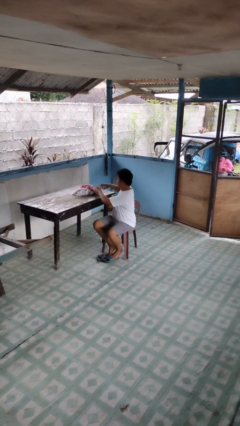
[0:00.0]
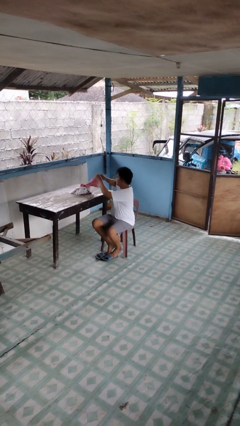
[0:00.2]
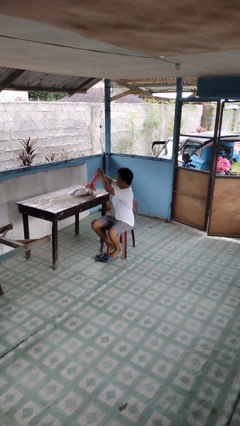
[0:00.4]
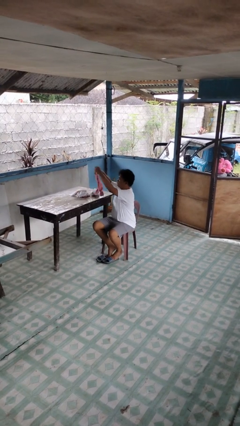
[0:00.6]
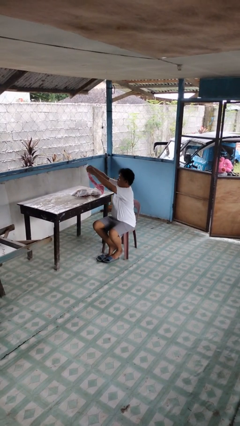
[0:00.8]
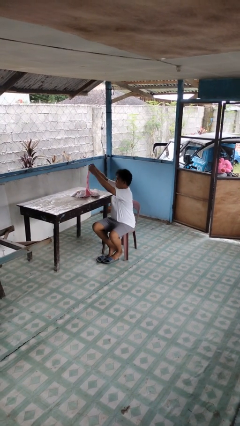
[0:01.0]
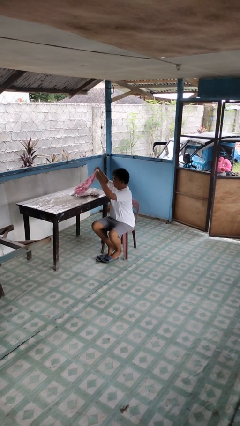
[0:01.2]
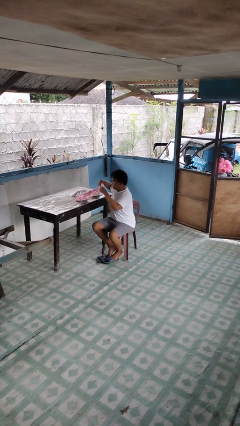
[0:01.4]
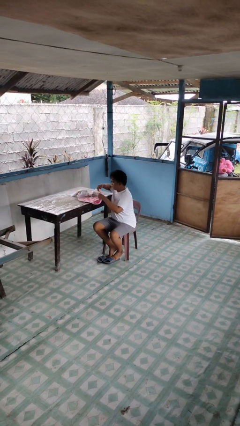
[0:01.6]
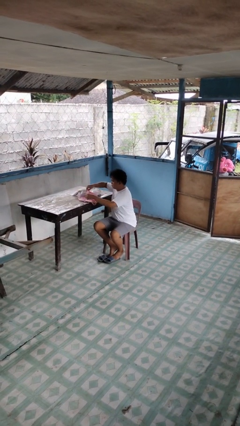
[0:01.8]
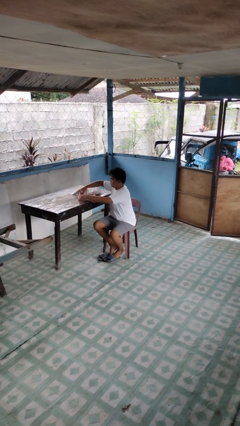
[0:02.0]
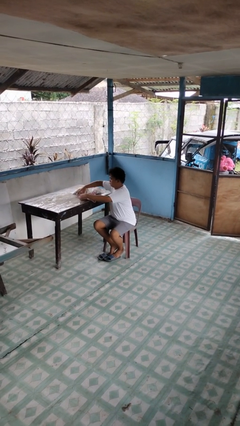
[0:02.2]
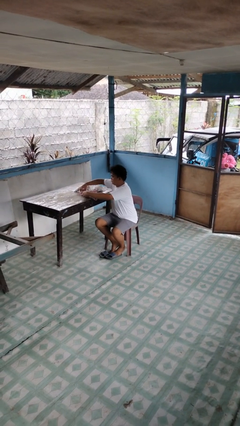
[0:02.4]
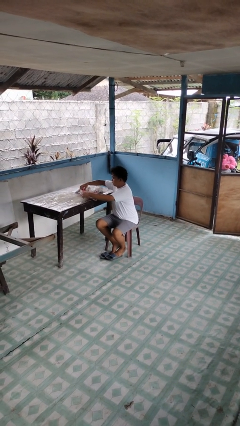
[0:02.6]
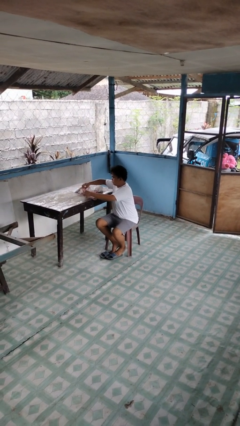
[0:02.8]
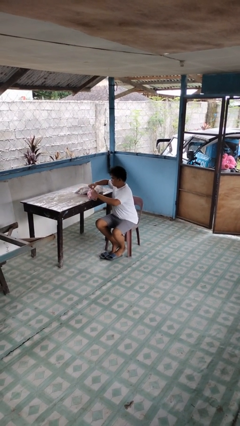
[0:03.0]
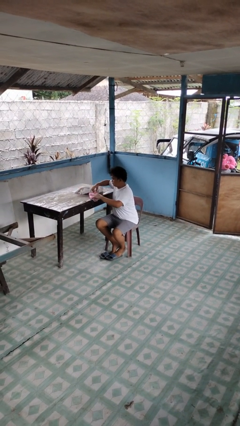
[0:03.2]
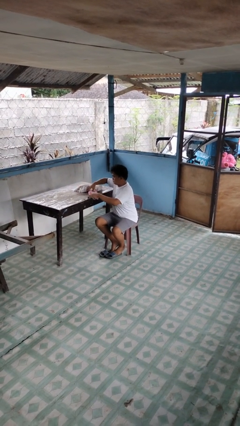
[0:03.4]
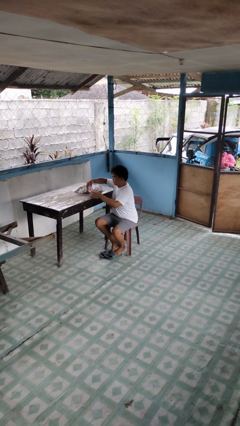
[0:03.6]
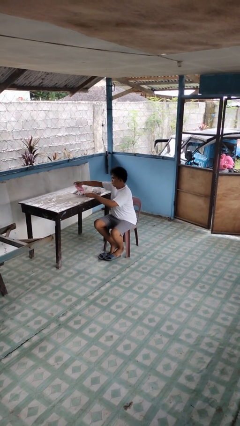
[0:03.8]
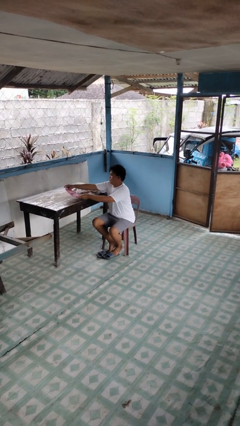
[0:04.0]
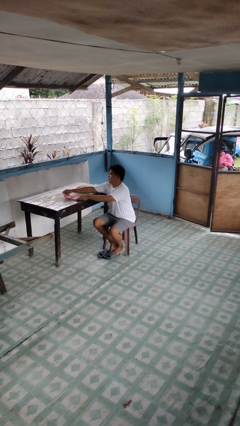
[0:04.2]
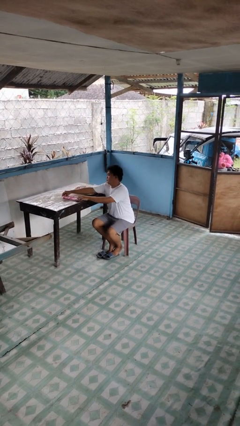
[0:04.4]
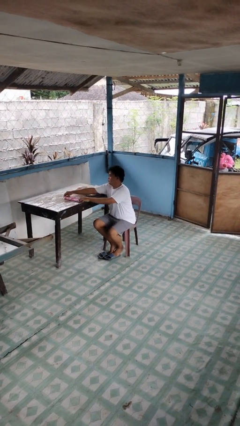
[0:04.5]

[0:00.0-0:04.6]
person folds towel

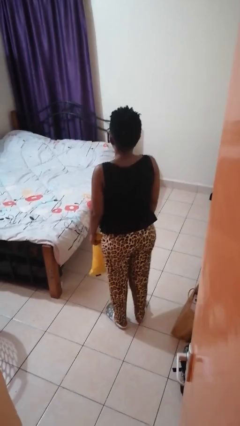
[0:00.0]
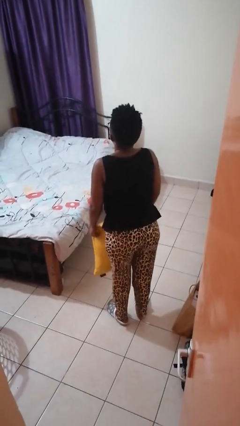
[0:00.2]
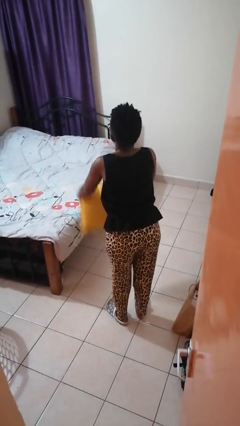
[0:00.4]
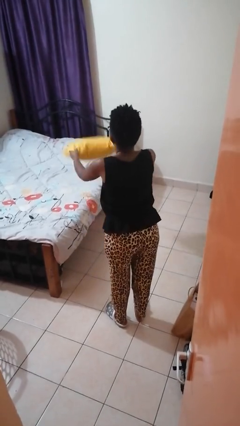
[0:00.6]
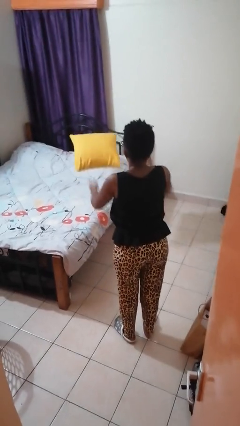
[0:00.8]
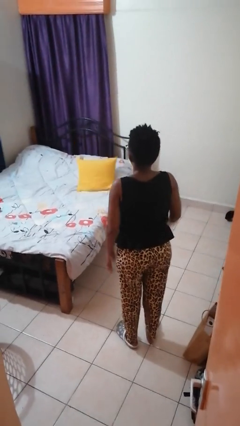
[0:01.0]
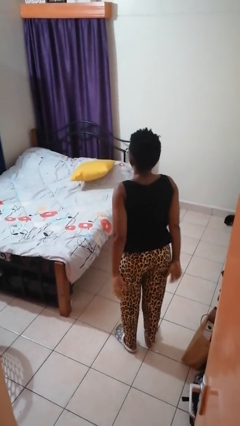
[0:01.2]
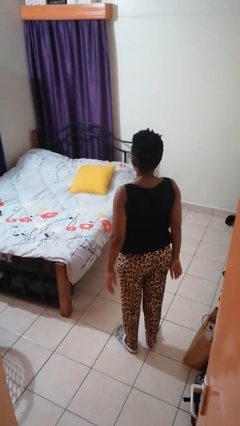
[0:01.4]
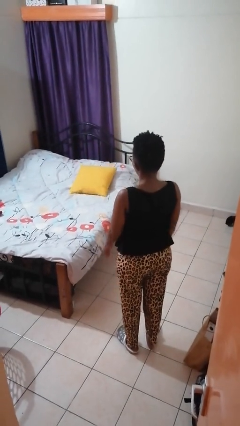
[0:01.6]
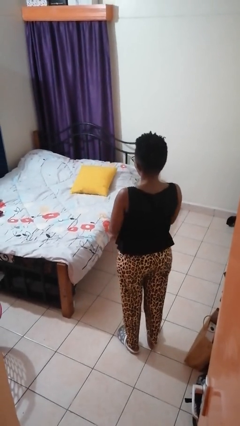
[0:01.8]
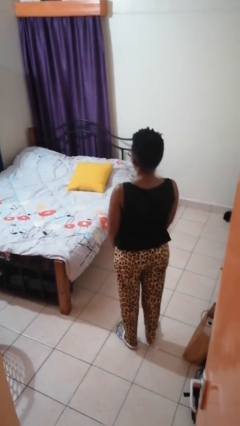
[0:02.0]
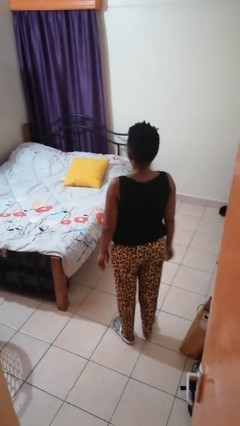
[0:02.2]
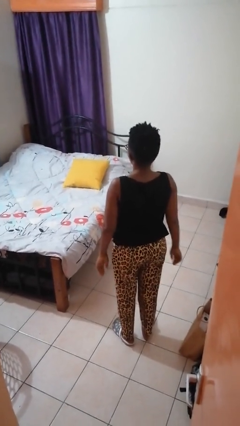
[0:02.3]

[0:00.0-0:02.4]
person throws object on bed

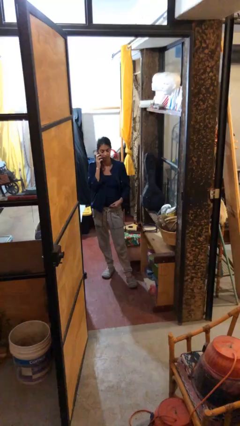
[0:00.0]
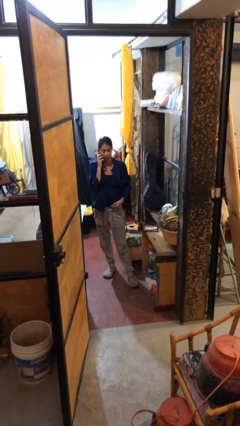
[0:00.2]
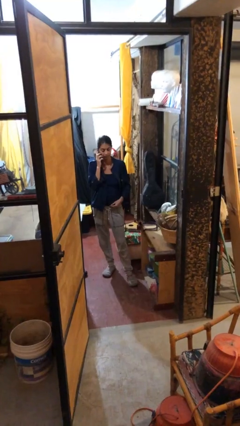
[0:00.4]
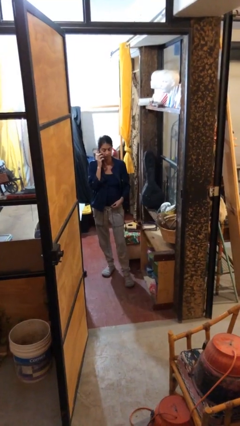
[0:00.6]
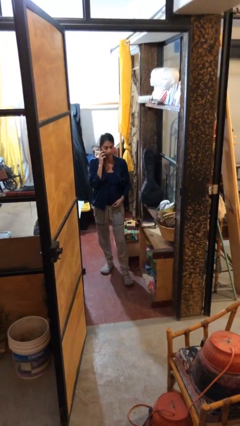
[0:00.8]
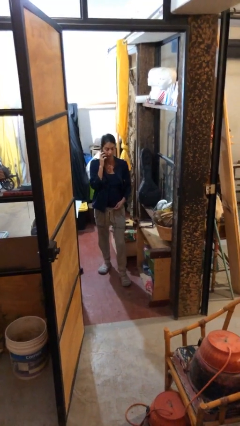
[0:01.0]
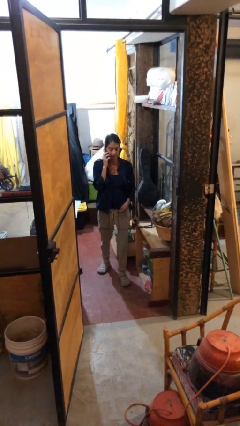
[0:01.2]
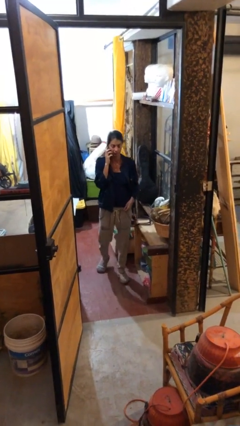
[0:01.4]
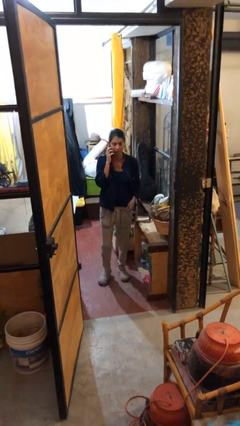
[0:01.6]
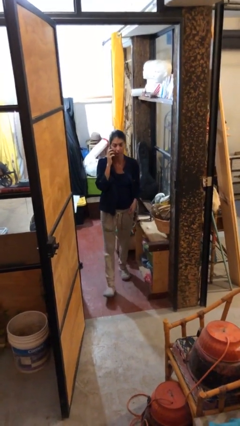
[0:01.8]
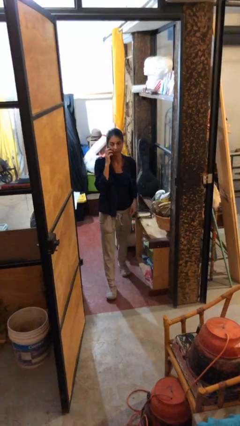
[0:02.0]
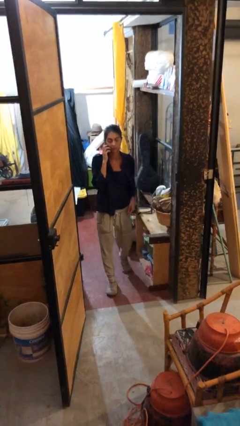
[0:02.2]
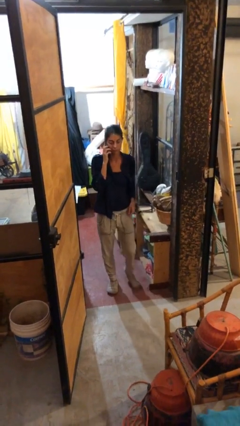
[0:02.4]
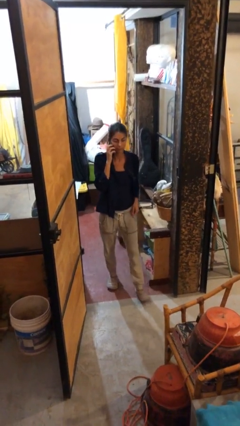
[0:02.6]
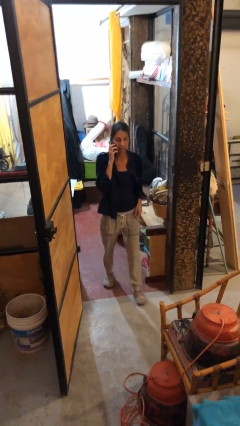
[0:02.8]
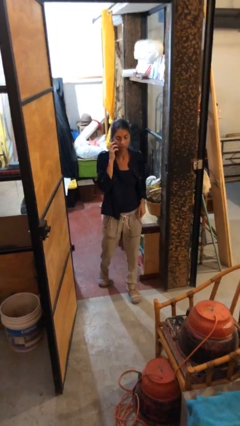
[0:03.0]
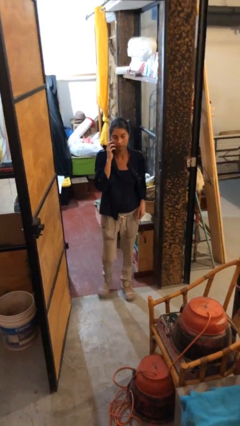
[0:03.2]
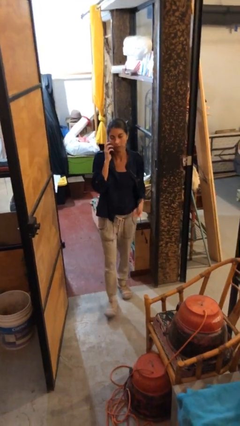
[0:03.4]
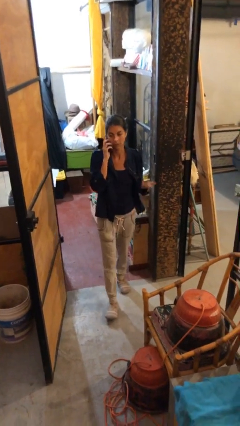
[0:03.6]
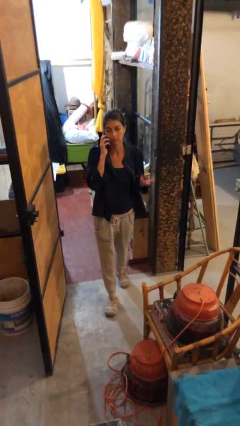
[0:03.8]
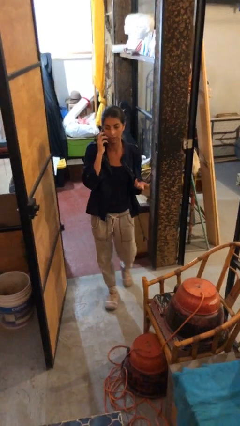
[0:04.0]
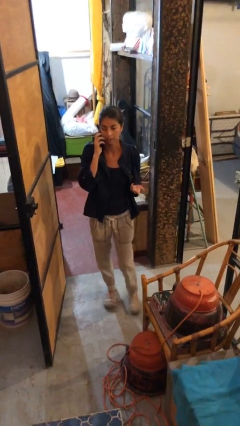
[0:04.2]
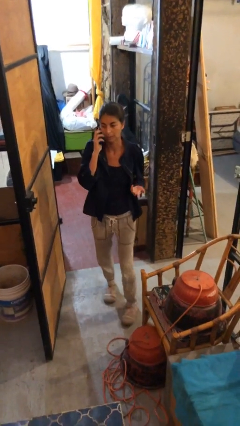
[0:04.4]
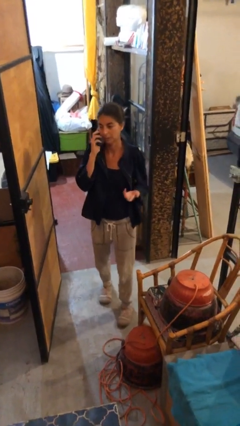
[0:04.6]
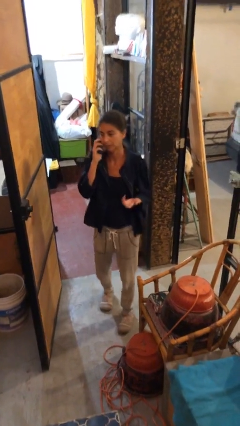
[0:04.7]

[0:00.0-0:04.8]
person enters scene through structure

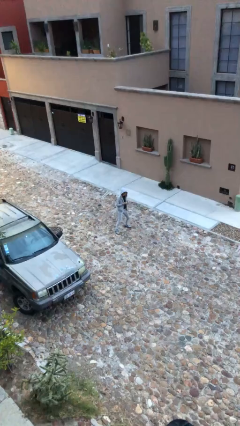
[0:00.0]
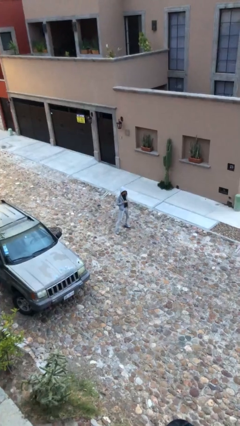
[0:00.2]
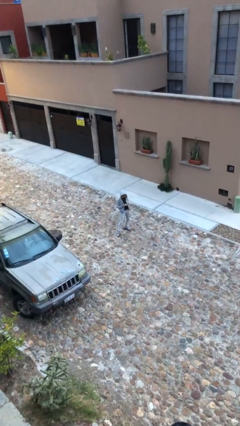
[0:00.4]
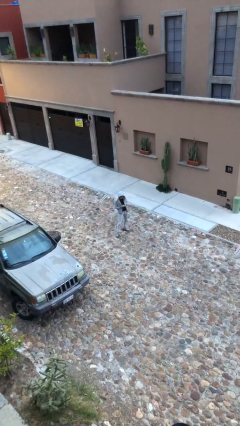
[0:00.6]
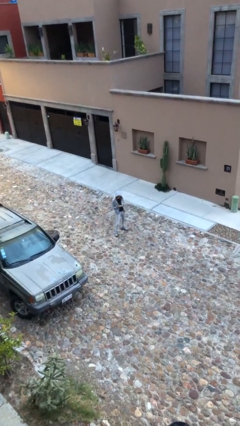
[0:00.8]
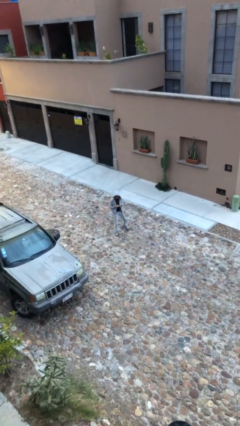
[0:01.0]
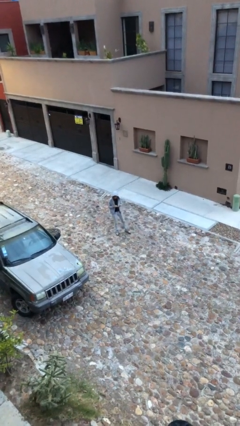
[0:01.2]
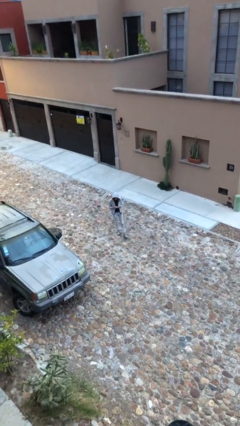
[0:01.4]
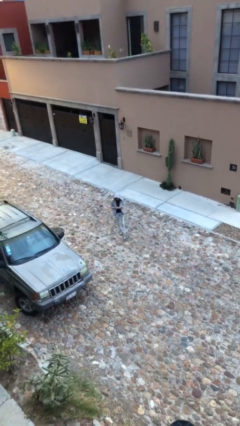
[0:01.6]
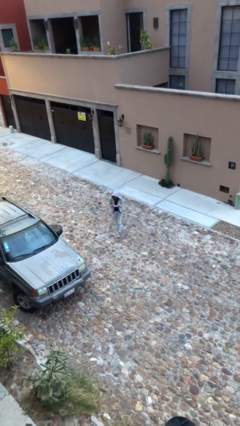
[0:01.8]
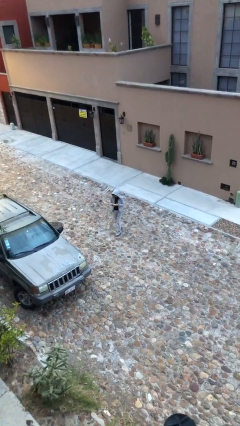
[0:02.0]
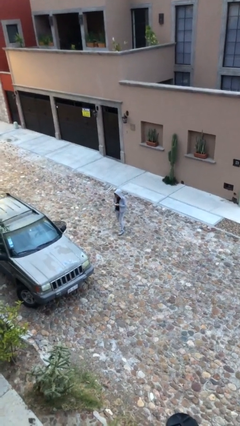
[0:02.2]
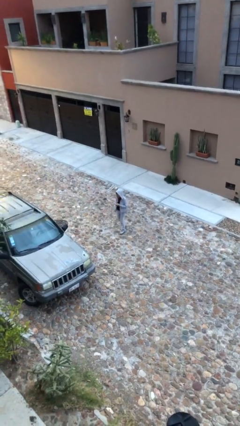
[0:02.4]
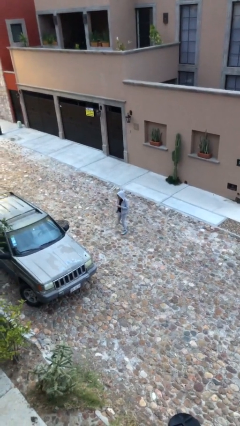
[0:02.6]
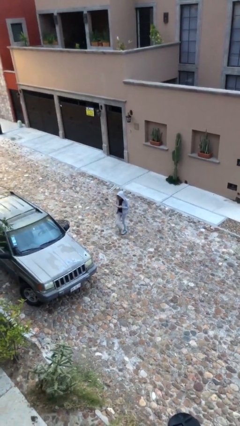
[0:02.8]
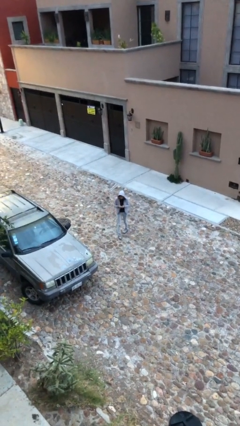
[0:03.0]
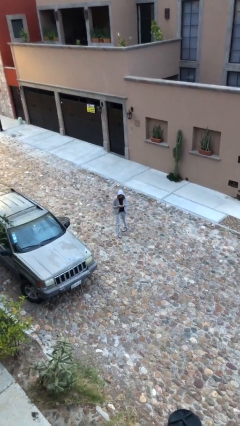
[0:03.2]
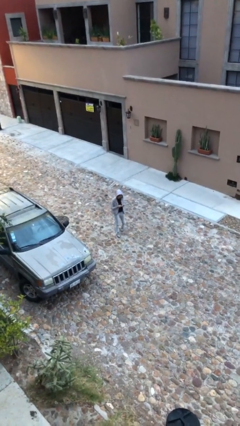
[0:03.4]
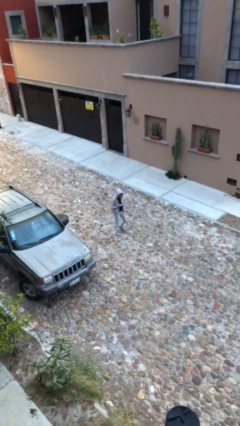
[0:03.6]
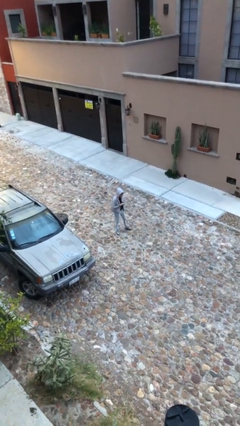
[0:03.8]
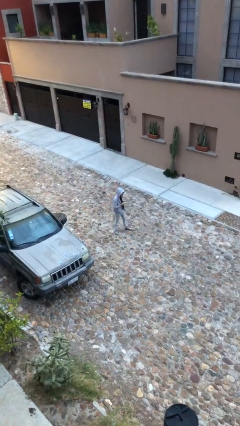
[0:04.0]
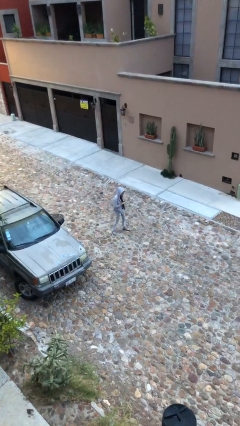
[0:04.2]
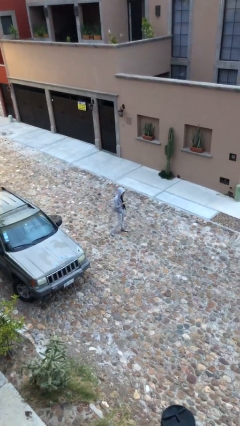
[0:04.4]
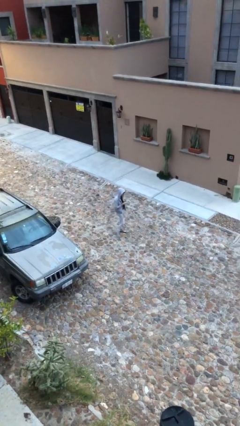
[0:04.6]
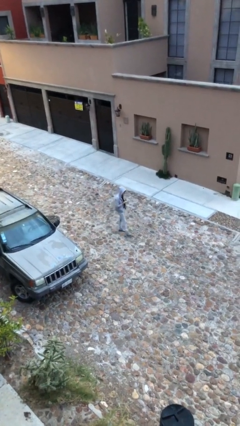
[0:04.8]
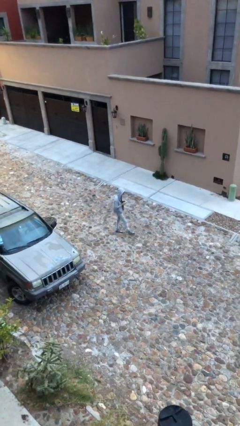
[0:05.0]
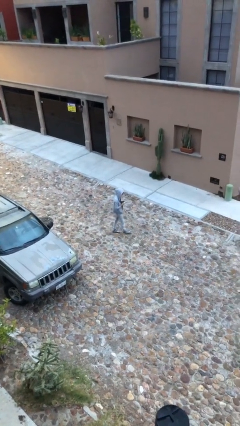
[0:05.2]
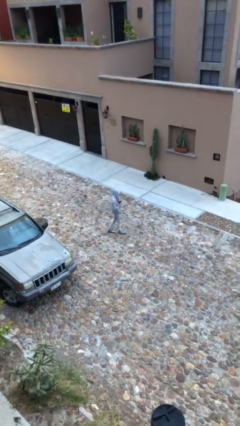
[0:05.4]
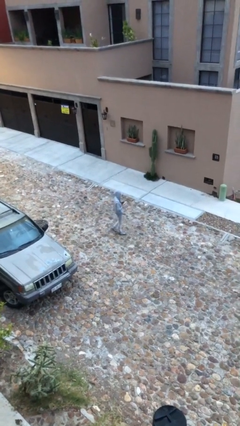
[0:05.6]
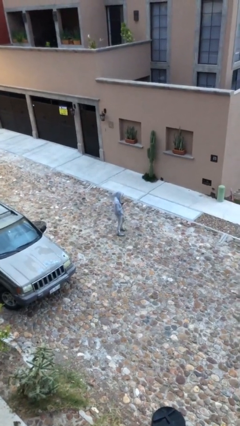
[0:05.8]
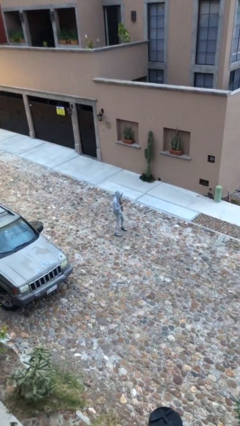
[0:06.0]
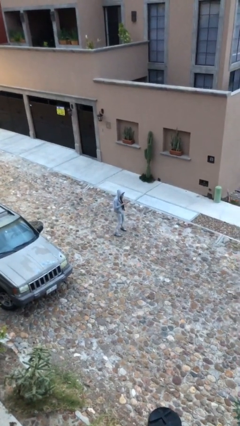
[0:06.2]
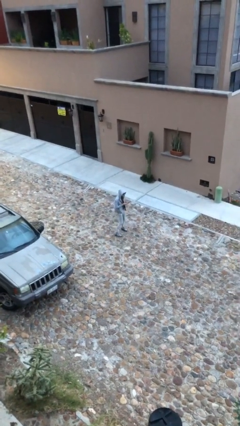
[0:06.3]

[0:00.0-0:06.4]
person texts on phone
